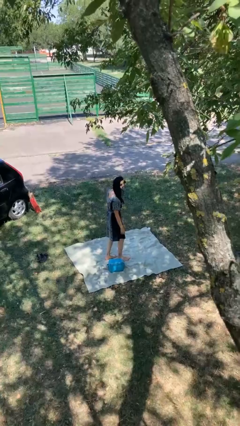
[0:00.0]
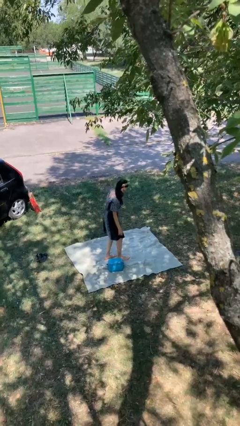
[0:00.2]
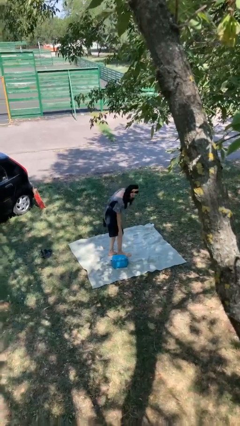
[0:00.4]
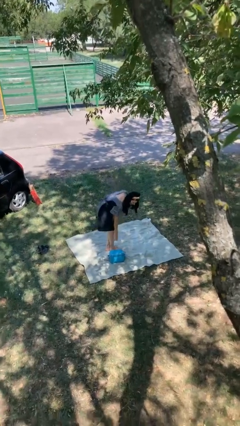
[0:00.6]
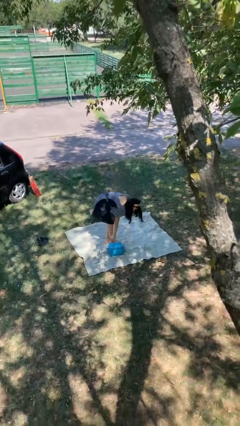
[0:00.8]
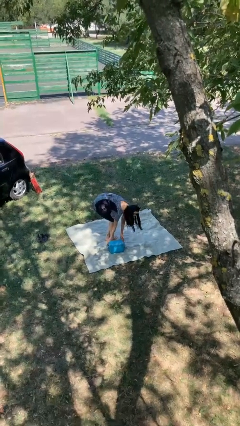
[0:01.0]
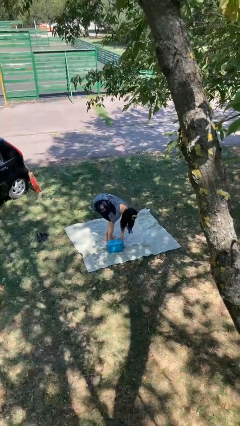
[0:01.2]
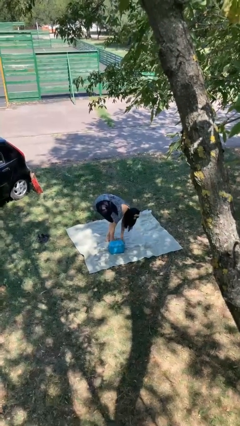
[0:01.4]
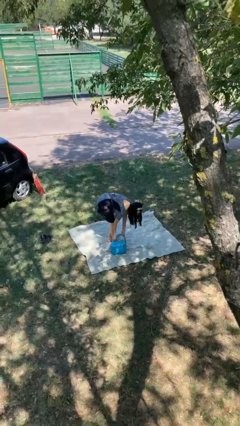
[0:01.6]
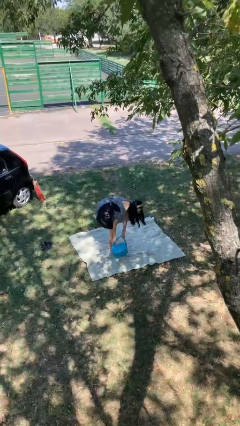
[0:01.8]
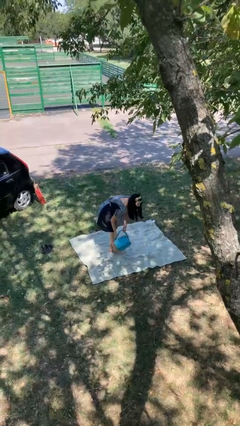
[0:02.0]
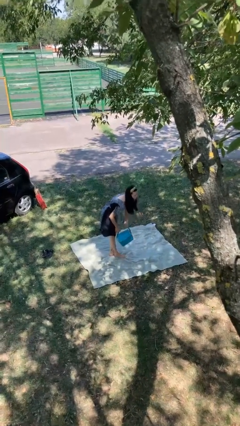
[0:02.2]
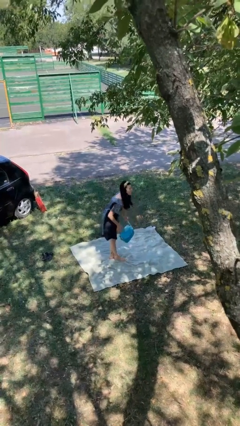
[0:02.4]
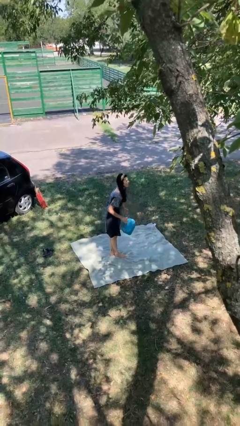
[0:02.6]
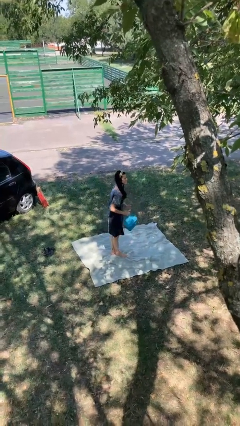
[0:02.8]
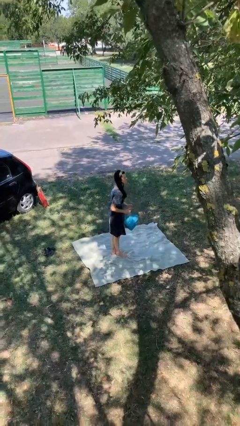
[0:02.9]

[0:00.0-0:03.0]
person picks up object from floor

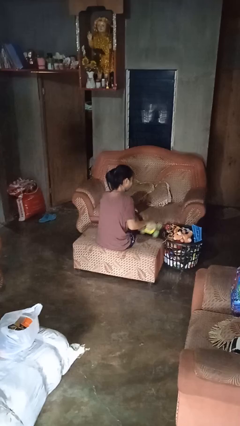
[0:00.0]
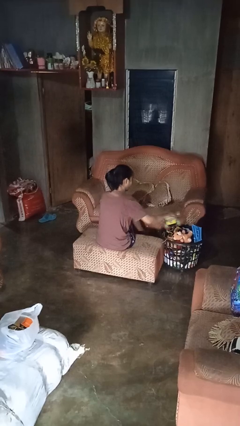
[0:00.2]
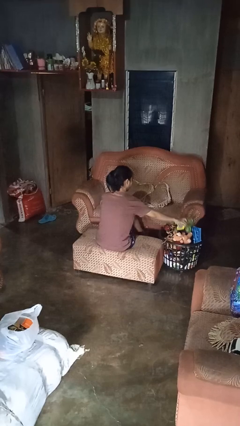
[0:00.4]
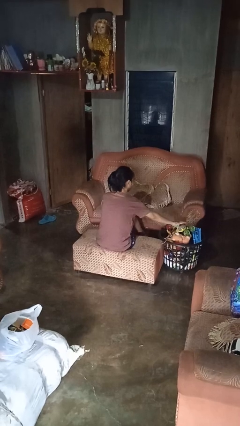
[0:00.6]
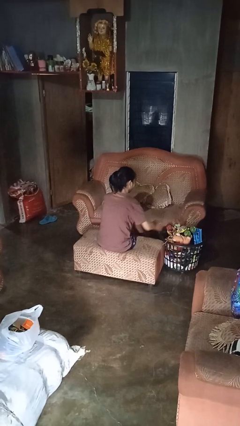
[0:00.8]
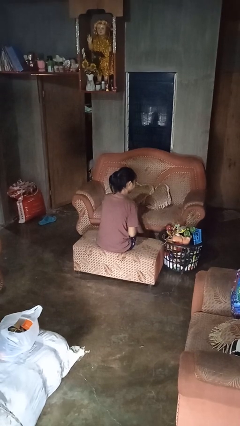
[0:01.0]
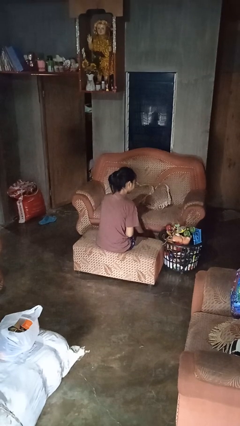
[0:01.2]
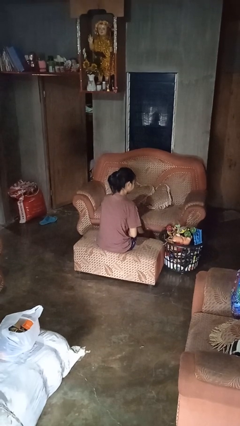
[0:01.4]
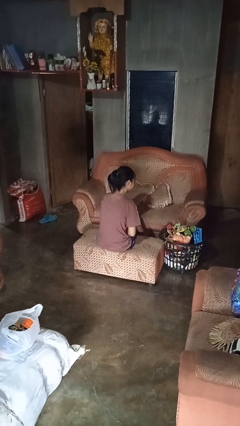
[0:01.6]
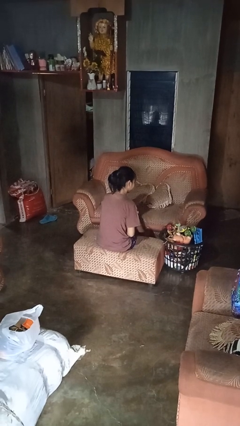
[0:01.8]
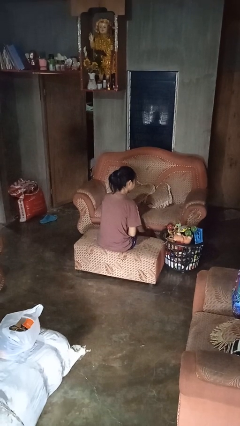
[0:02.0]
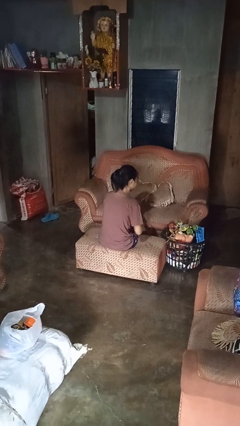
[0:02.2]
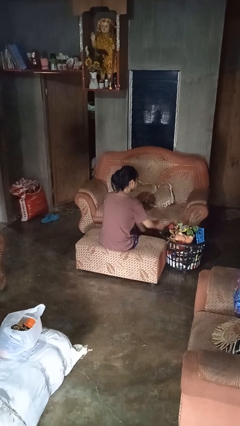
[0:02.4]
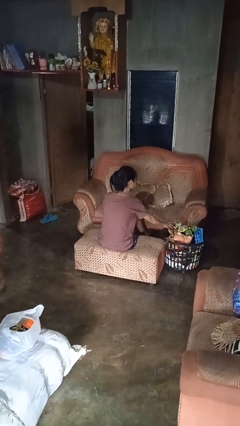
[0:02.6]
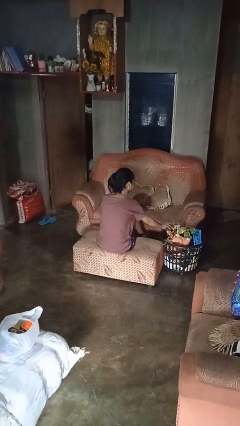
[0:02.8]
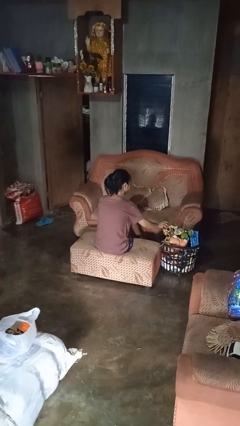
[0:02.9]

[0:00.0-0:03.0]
person puts object into basket

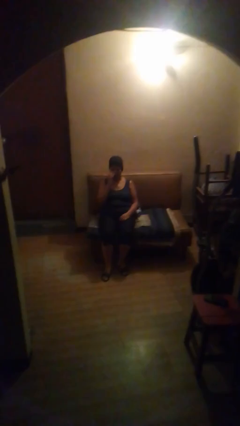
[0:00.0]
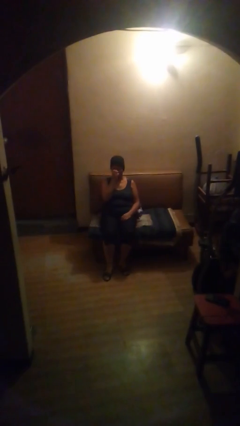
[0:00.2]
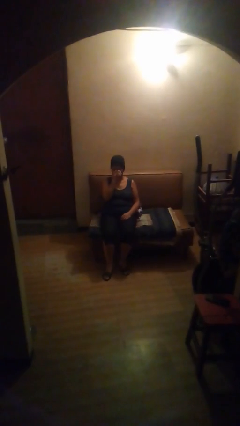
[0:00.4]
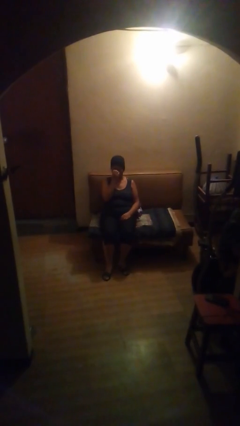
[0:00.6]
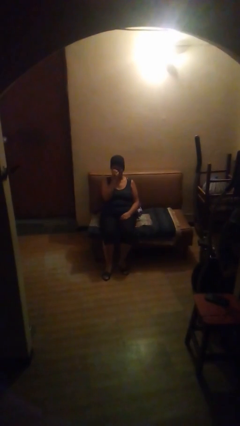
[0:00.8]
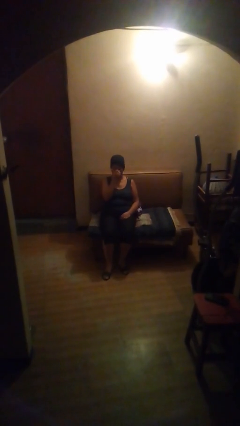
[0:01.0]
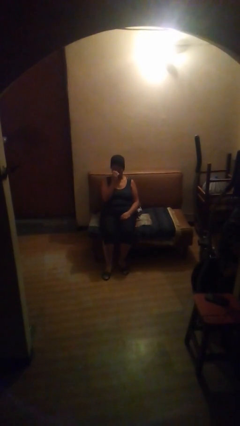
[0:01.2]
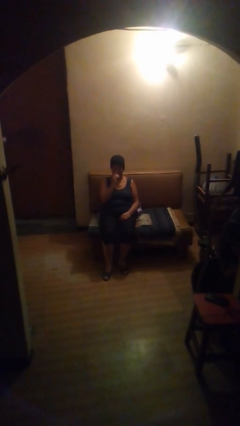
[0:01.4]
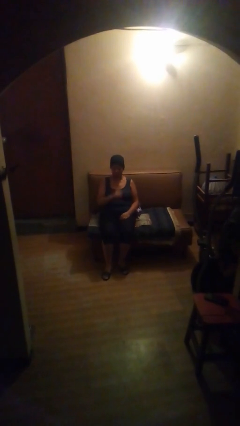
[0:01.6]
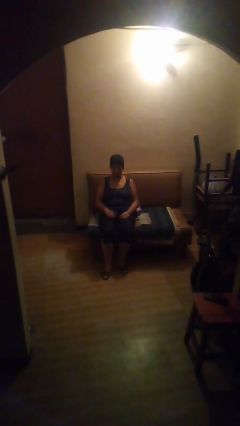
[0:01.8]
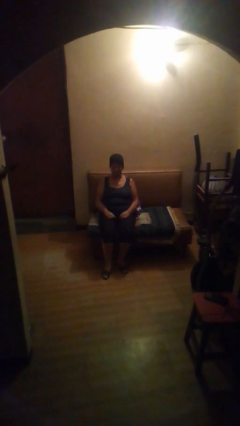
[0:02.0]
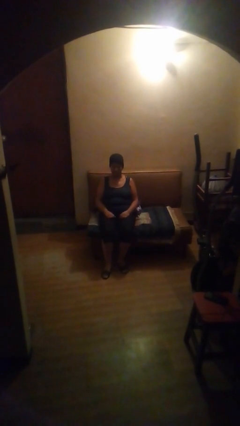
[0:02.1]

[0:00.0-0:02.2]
person scratches face

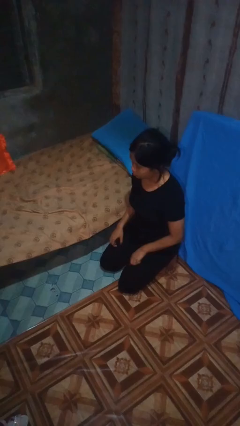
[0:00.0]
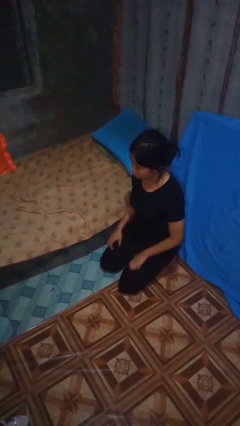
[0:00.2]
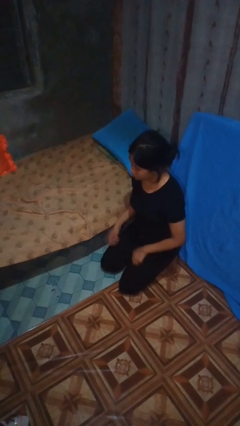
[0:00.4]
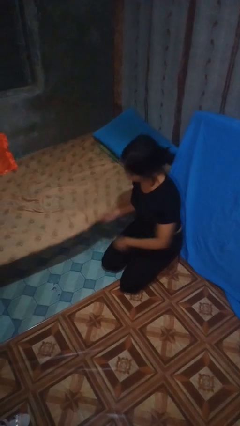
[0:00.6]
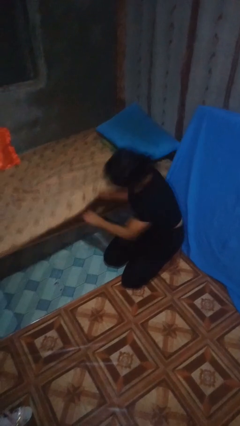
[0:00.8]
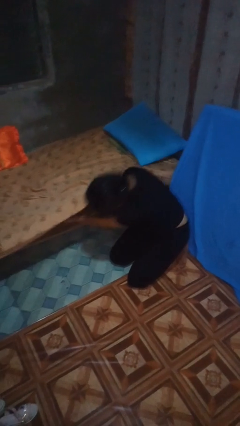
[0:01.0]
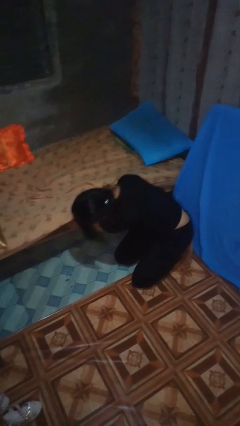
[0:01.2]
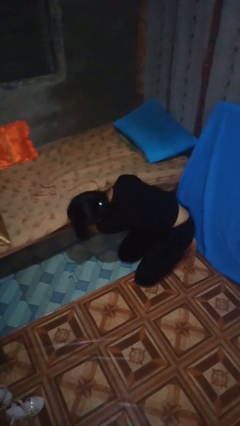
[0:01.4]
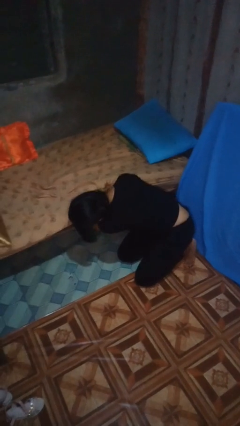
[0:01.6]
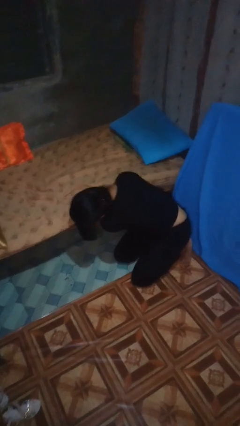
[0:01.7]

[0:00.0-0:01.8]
person searches under bed

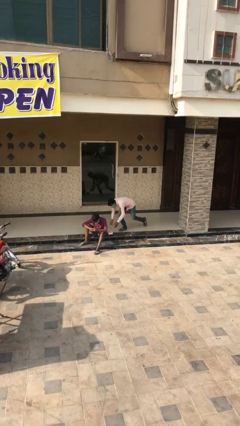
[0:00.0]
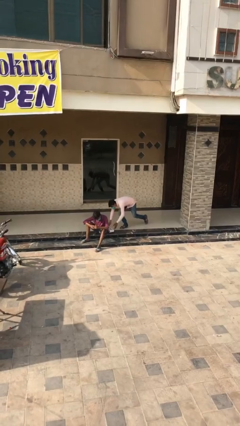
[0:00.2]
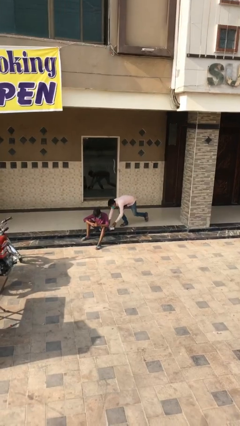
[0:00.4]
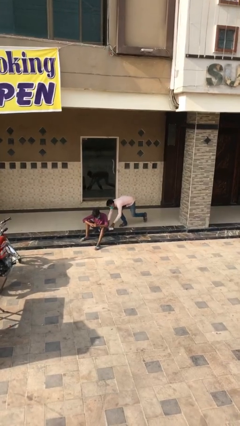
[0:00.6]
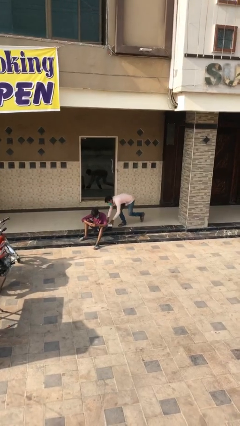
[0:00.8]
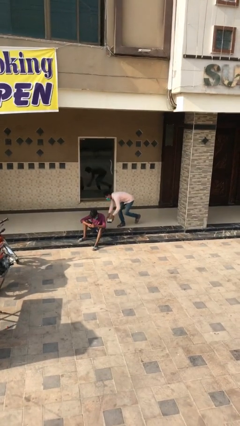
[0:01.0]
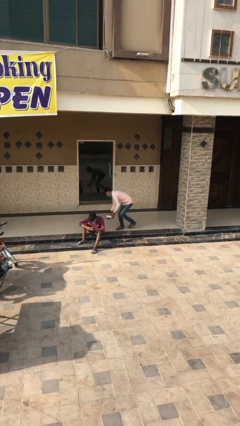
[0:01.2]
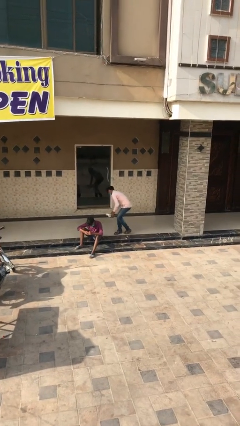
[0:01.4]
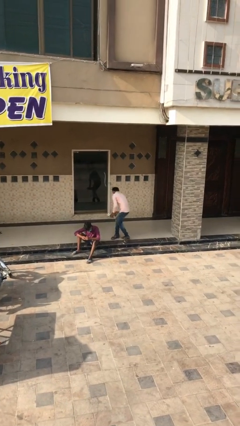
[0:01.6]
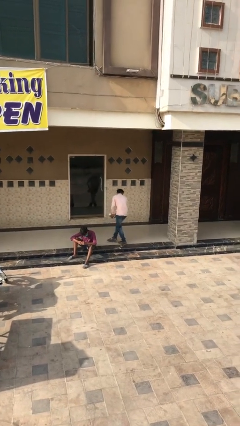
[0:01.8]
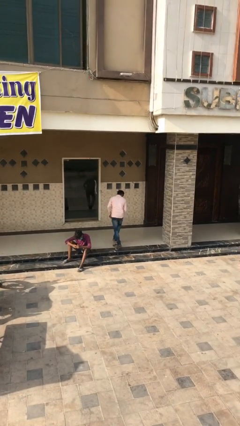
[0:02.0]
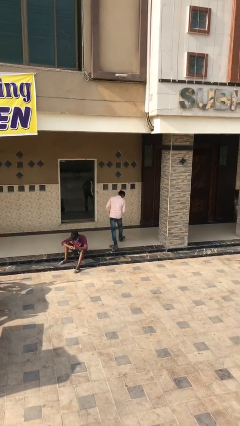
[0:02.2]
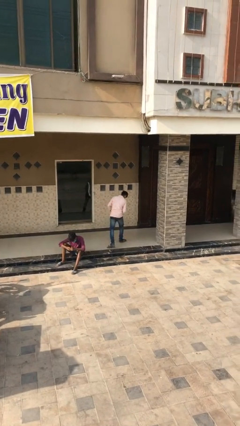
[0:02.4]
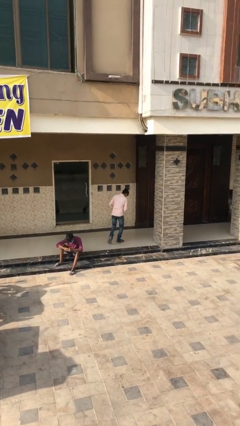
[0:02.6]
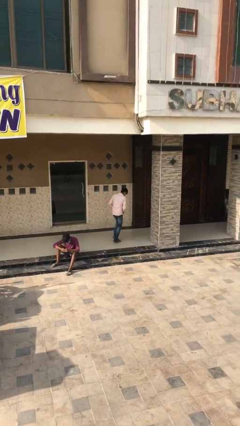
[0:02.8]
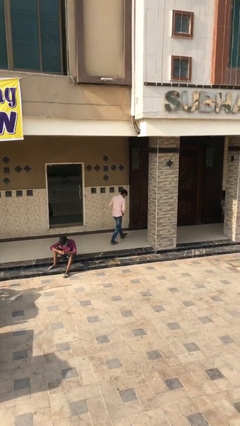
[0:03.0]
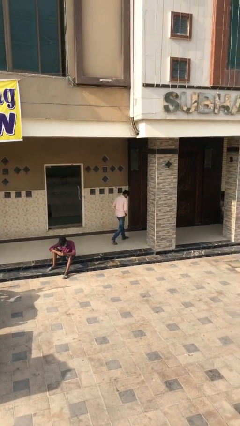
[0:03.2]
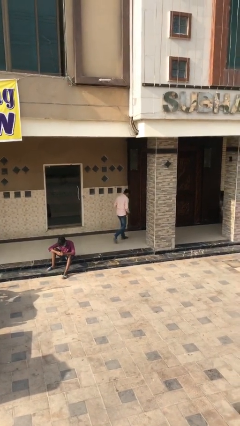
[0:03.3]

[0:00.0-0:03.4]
person steals object from person

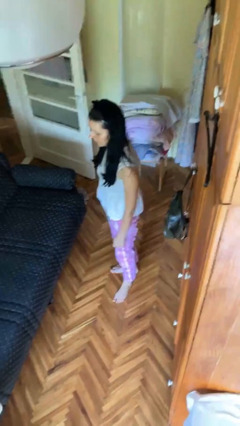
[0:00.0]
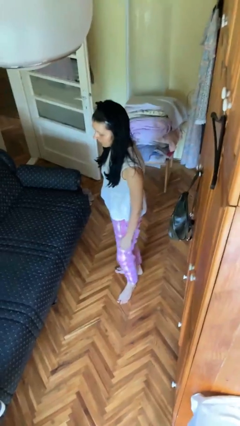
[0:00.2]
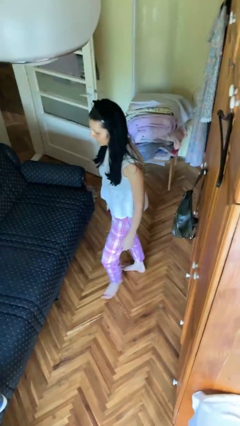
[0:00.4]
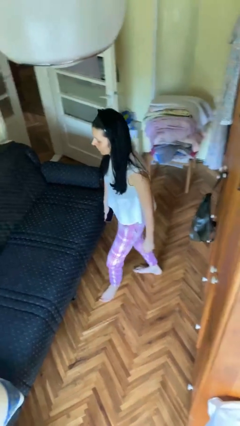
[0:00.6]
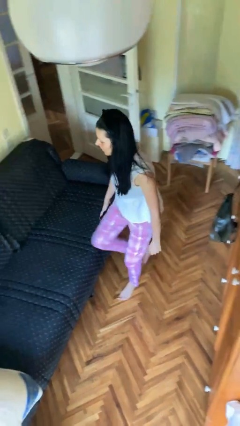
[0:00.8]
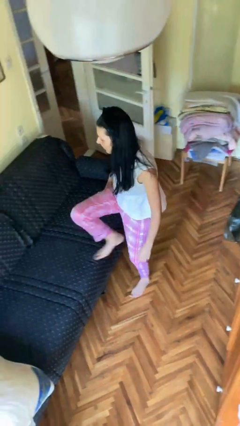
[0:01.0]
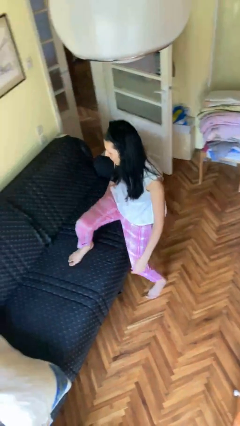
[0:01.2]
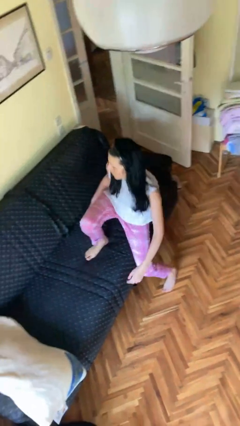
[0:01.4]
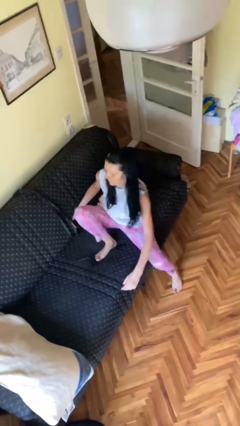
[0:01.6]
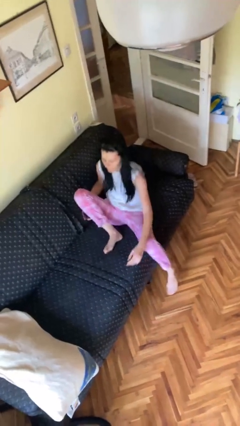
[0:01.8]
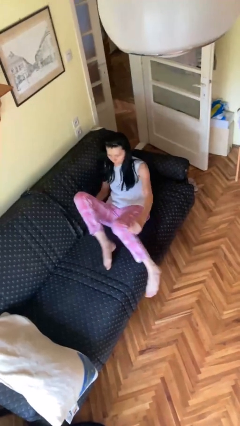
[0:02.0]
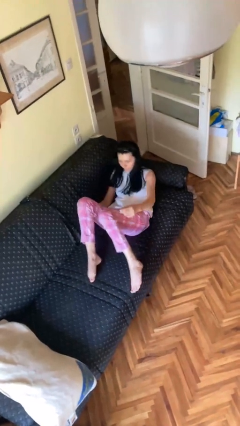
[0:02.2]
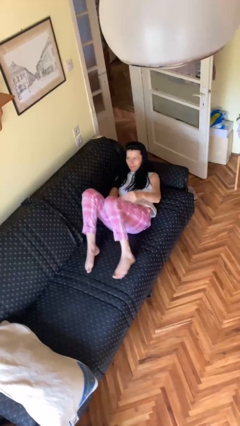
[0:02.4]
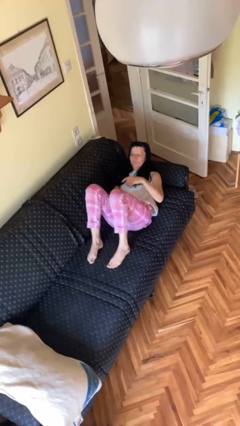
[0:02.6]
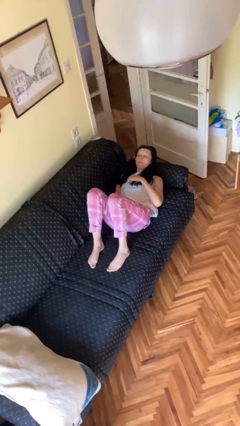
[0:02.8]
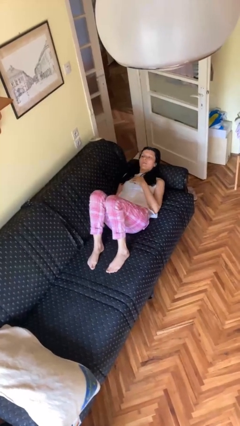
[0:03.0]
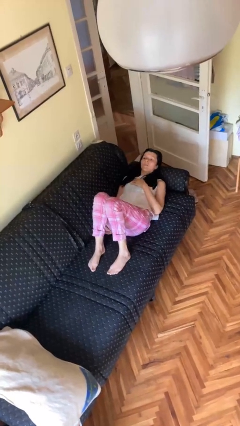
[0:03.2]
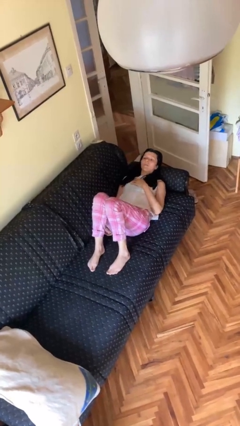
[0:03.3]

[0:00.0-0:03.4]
person lies down on couch

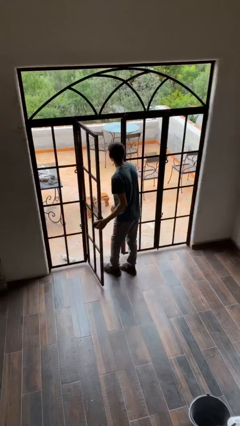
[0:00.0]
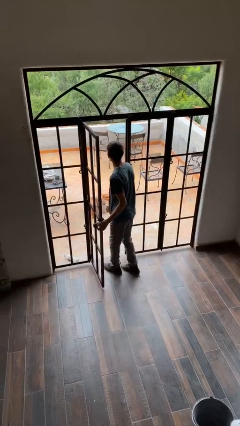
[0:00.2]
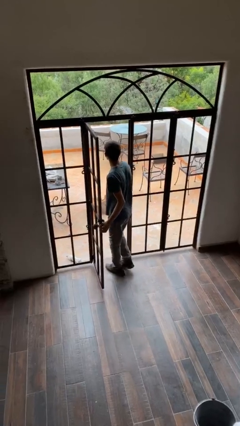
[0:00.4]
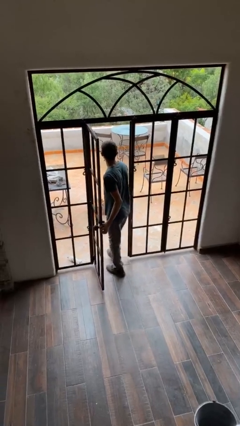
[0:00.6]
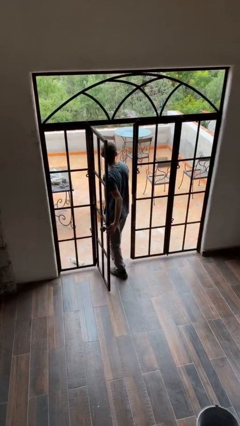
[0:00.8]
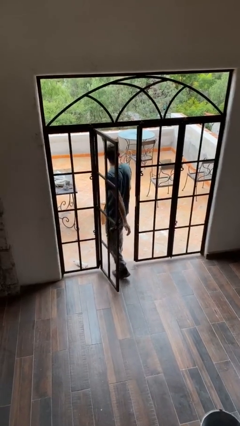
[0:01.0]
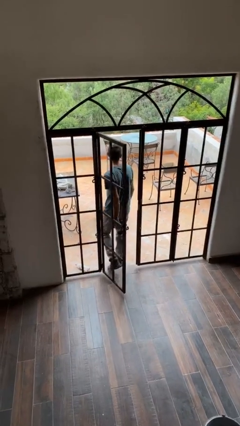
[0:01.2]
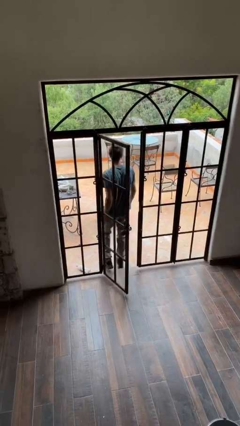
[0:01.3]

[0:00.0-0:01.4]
person exits scene through structure
